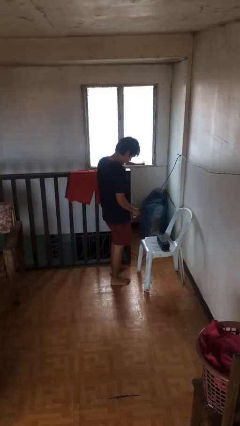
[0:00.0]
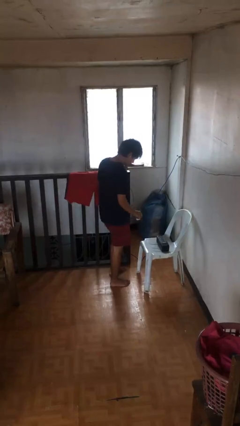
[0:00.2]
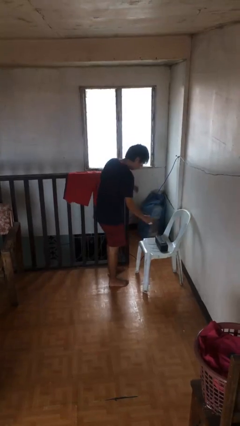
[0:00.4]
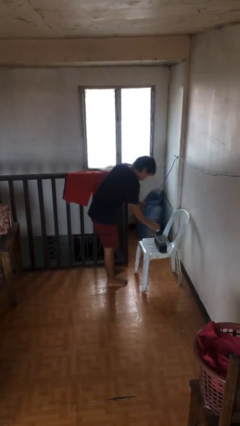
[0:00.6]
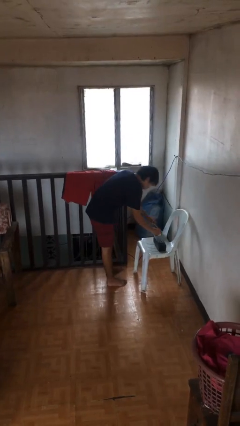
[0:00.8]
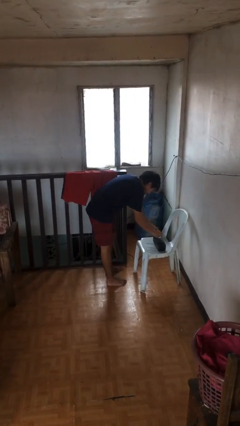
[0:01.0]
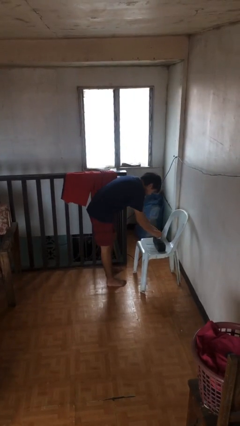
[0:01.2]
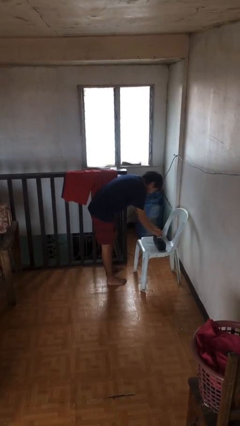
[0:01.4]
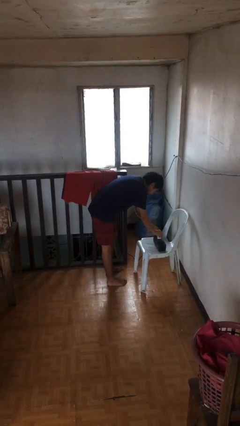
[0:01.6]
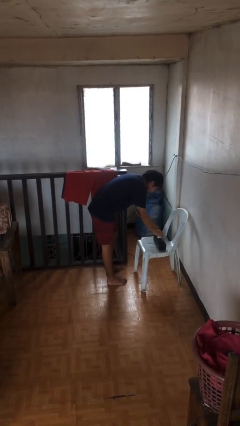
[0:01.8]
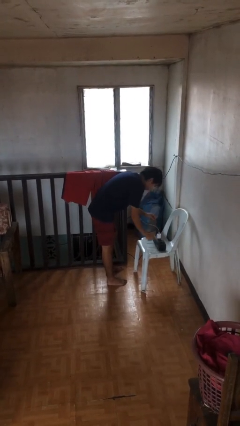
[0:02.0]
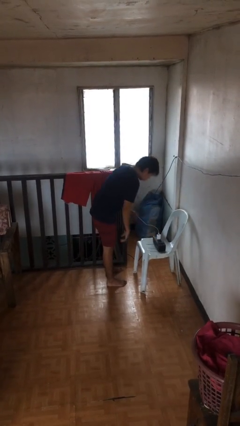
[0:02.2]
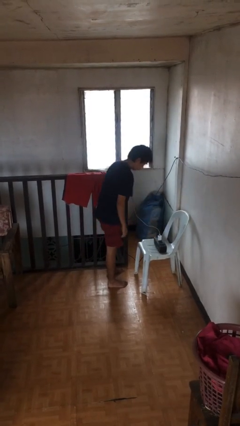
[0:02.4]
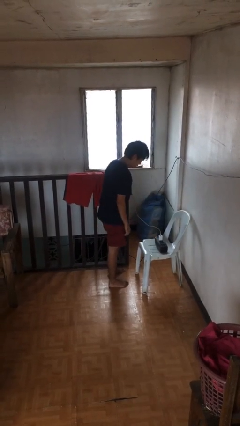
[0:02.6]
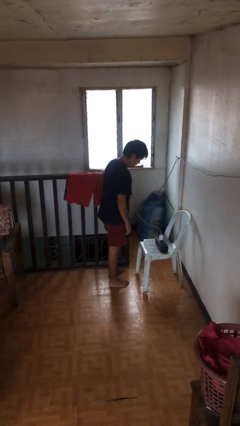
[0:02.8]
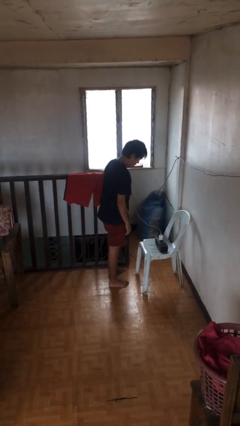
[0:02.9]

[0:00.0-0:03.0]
person plugs into electrical socket

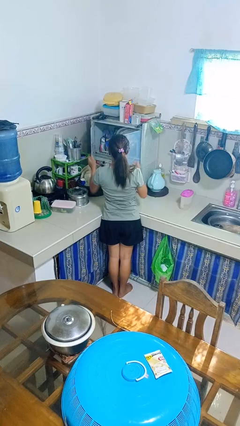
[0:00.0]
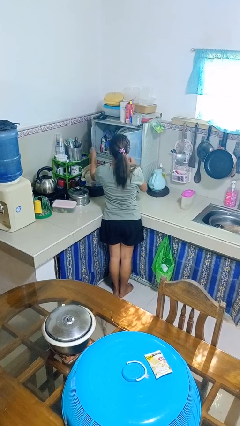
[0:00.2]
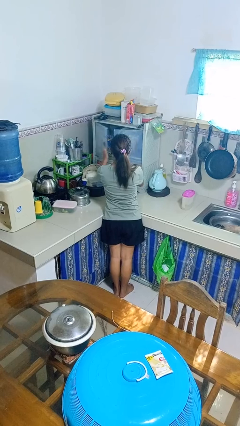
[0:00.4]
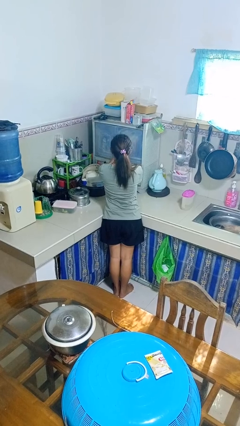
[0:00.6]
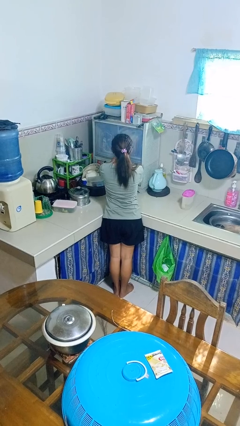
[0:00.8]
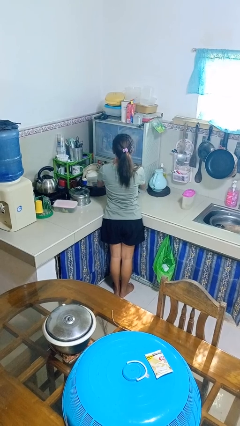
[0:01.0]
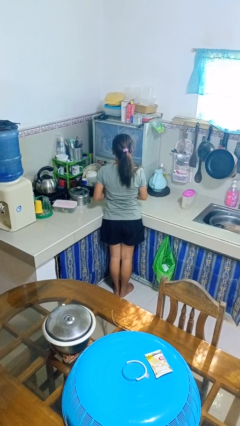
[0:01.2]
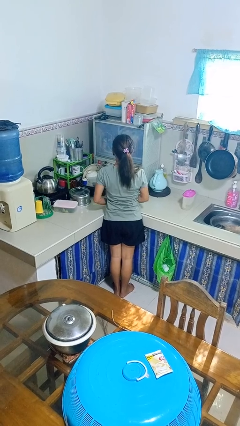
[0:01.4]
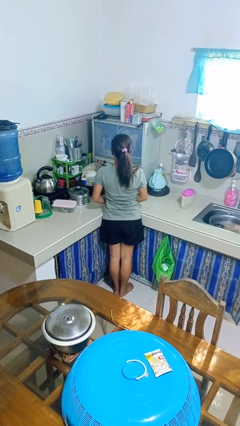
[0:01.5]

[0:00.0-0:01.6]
person closes kitchen drawer

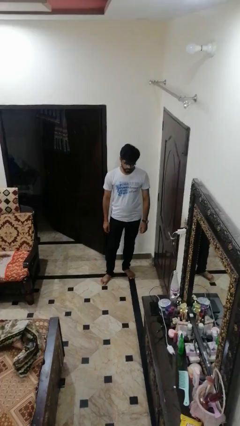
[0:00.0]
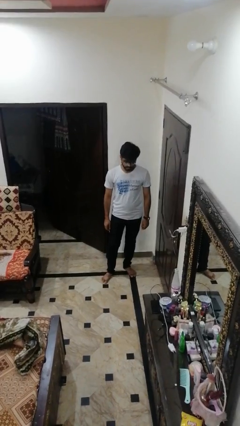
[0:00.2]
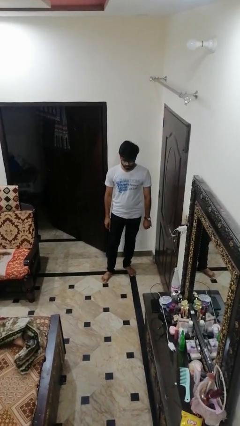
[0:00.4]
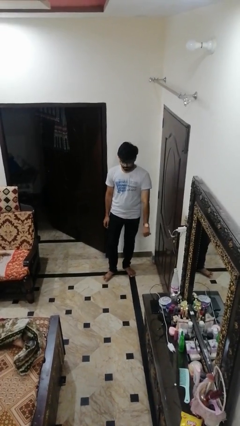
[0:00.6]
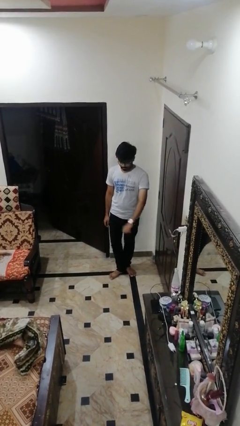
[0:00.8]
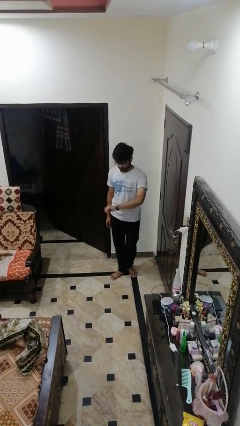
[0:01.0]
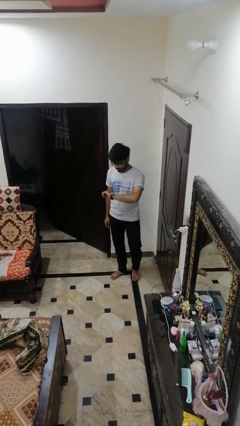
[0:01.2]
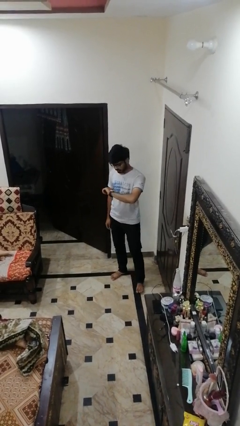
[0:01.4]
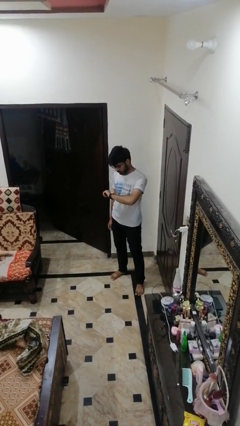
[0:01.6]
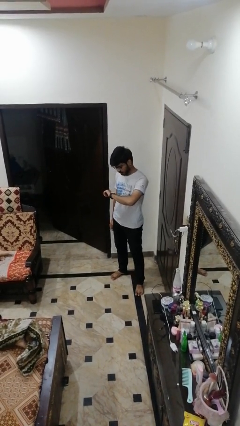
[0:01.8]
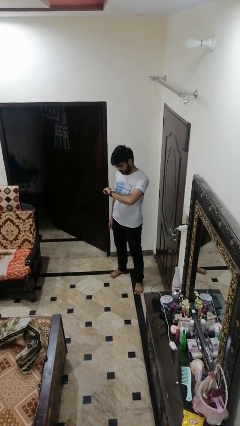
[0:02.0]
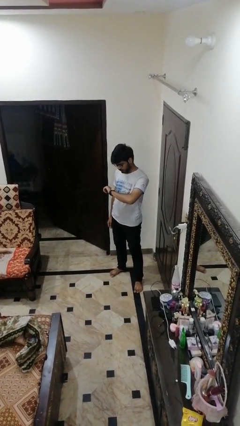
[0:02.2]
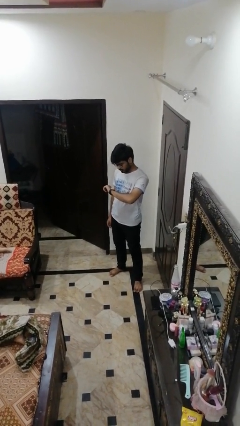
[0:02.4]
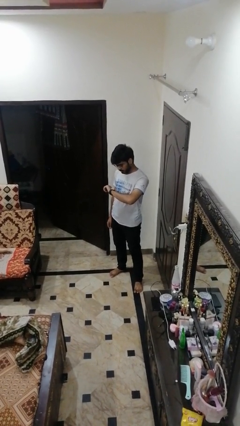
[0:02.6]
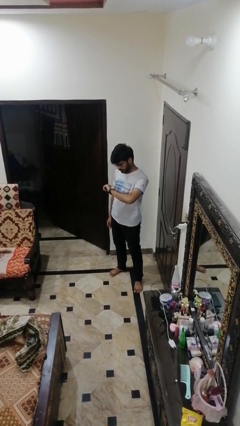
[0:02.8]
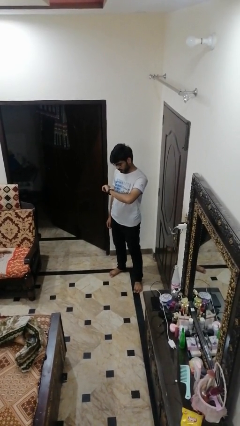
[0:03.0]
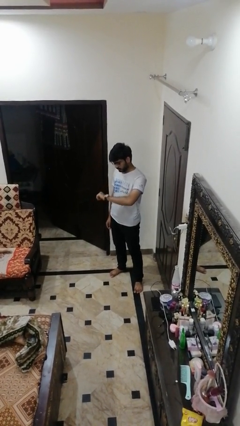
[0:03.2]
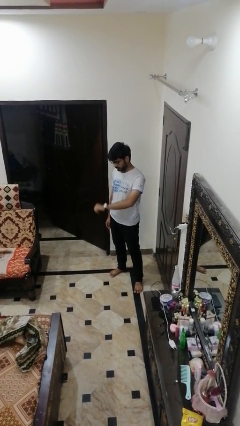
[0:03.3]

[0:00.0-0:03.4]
person looks at wristwatch

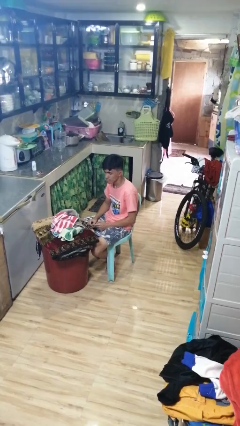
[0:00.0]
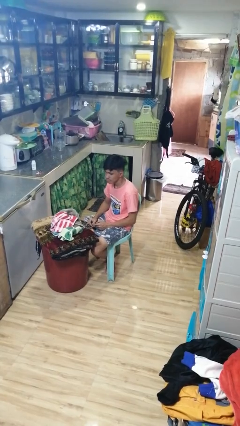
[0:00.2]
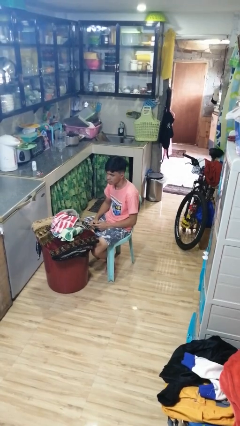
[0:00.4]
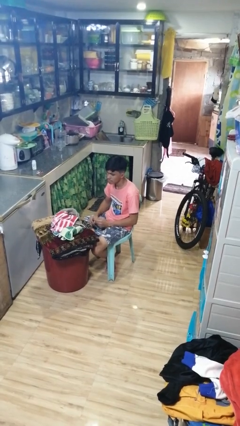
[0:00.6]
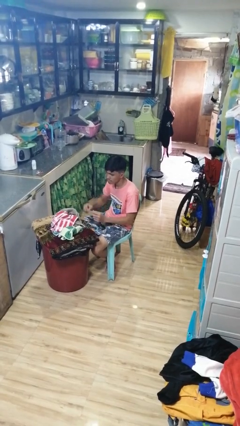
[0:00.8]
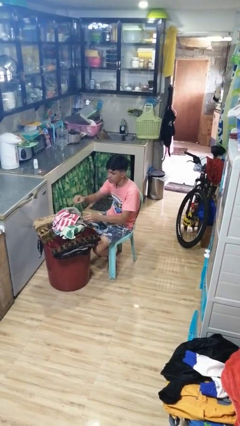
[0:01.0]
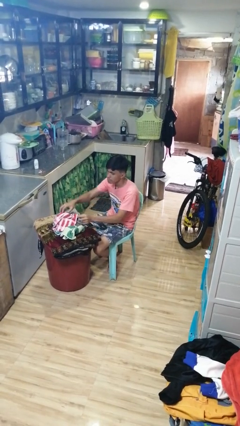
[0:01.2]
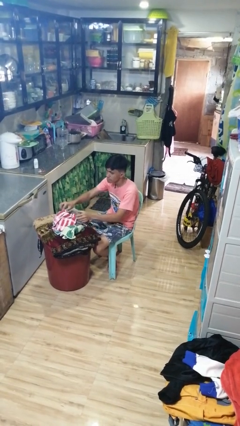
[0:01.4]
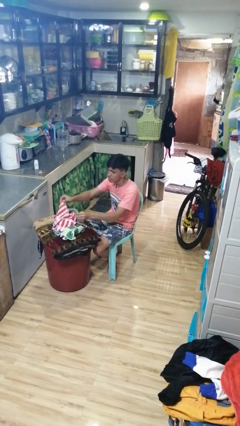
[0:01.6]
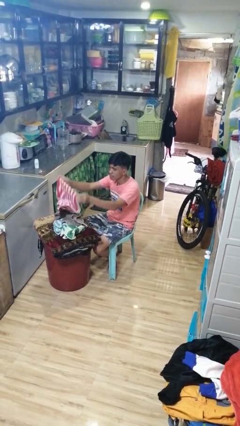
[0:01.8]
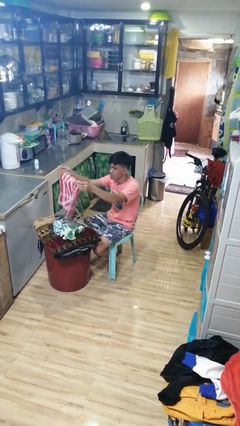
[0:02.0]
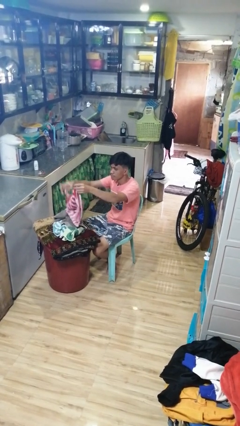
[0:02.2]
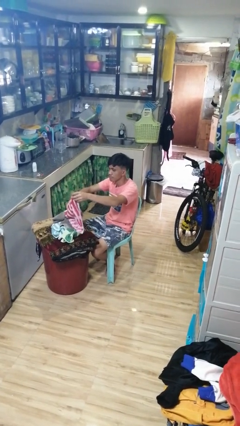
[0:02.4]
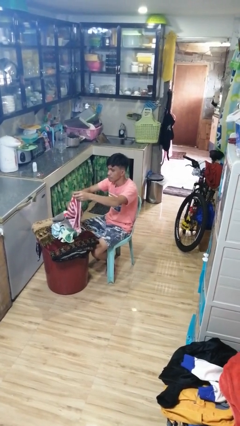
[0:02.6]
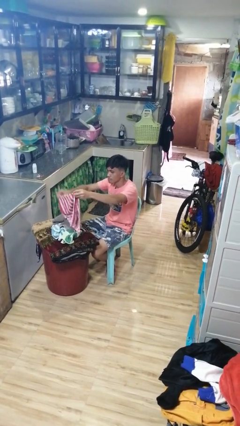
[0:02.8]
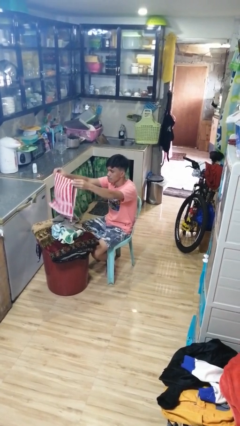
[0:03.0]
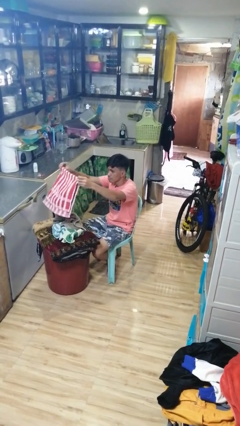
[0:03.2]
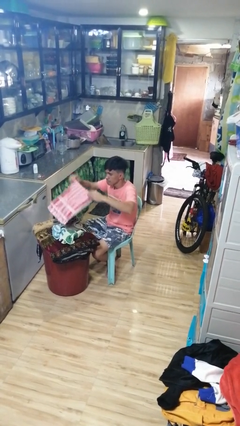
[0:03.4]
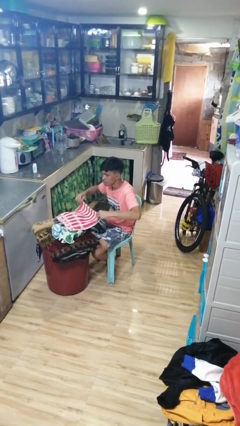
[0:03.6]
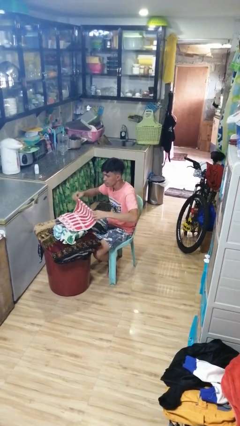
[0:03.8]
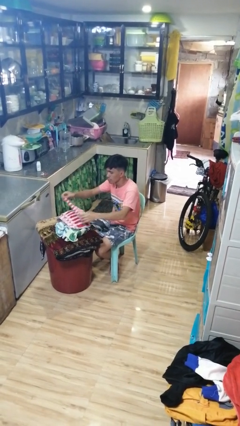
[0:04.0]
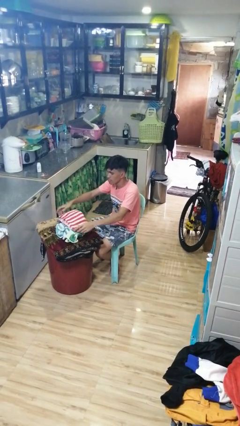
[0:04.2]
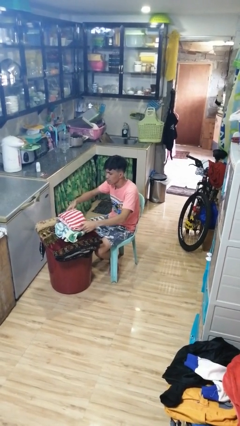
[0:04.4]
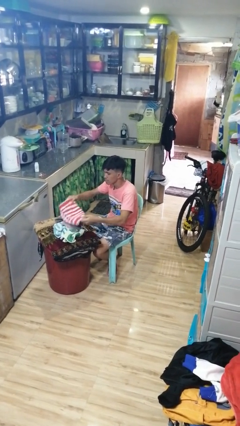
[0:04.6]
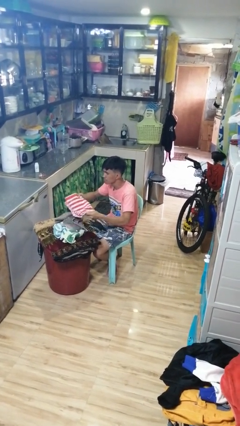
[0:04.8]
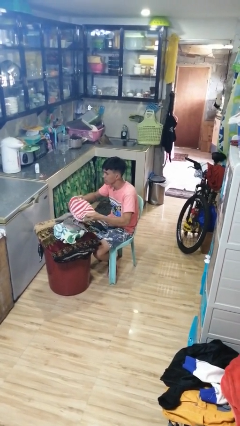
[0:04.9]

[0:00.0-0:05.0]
person folds towel

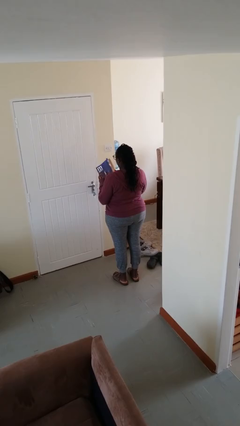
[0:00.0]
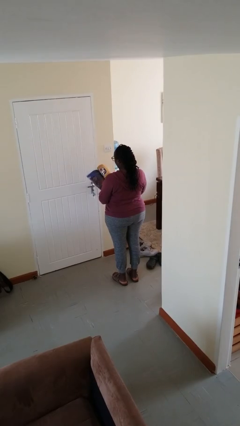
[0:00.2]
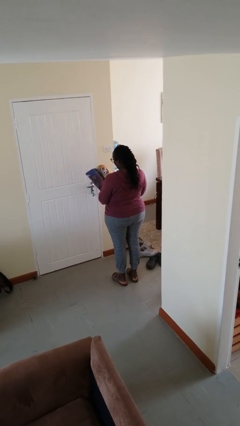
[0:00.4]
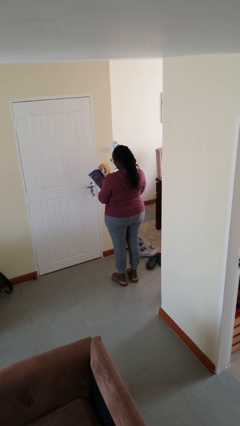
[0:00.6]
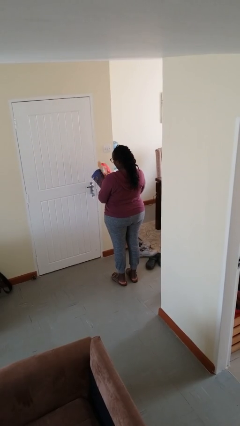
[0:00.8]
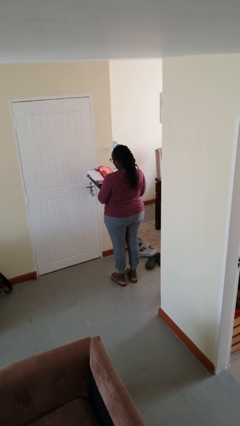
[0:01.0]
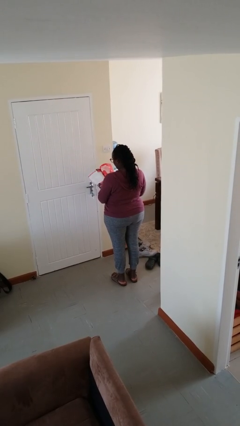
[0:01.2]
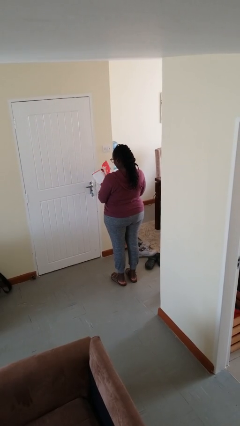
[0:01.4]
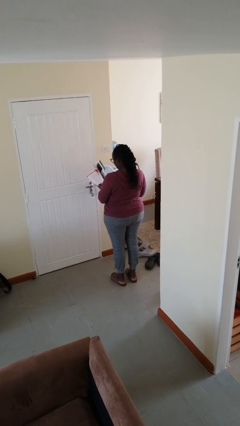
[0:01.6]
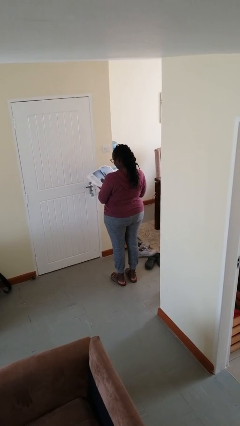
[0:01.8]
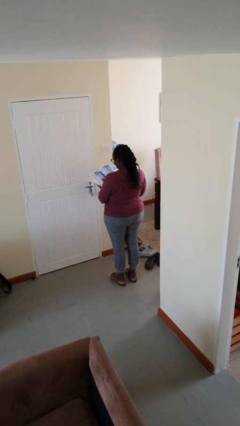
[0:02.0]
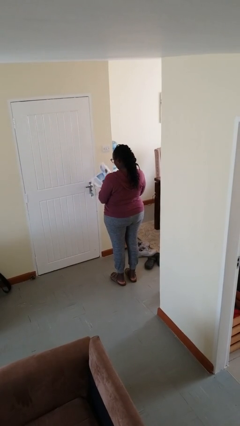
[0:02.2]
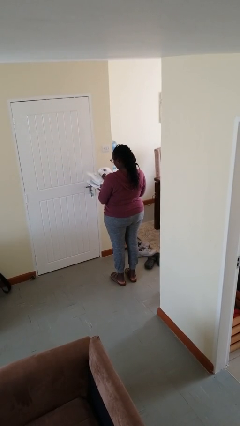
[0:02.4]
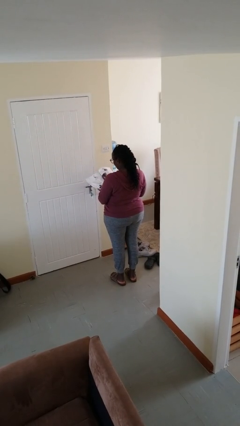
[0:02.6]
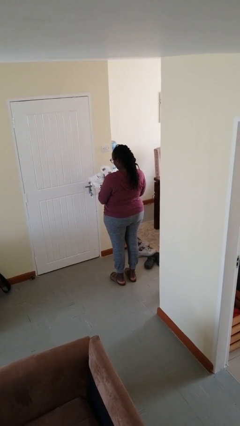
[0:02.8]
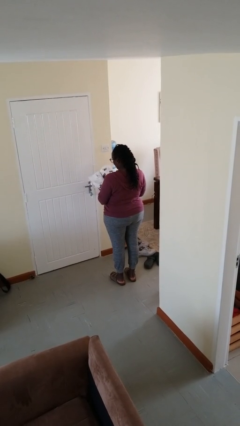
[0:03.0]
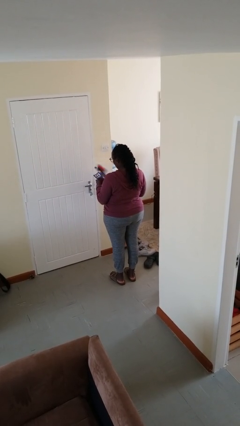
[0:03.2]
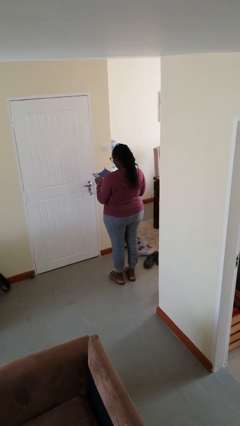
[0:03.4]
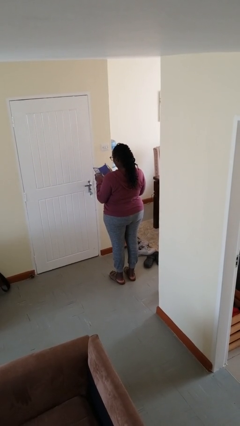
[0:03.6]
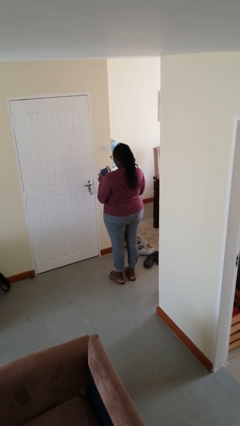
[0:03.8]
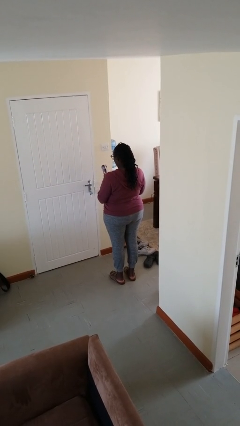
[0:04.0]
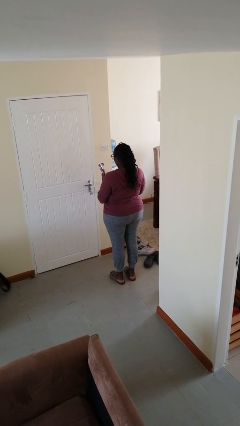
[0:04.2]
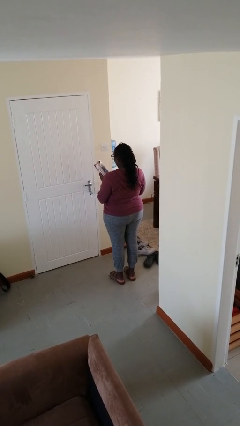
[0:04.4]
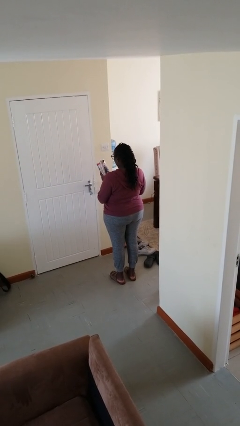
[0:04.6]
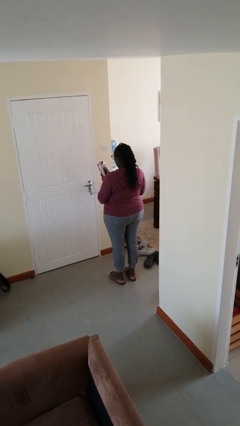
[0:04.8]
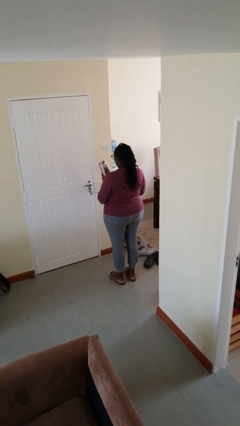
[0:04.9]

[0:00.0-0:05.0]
person reads magazine
